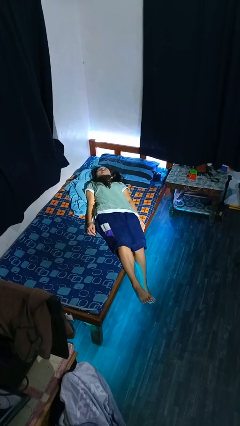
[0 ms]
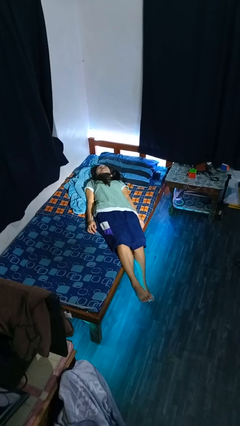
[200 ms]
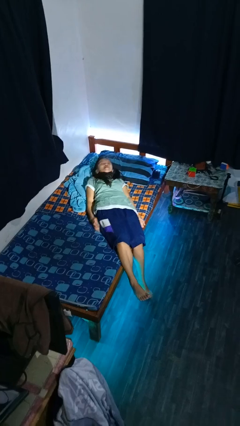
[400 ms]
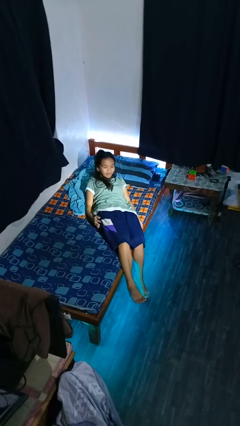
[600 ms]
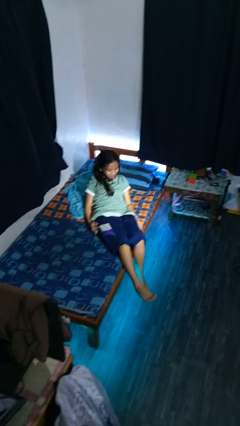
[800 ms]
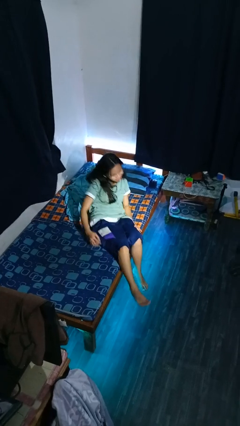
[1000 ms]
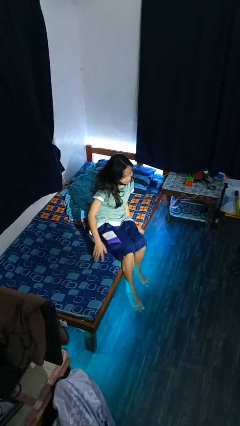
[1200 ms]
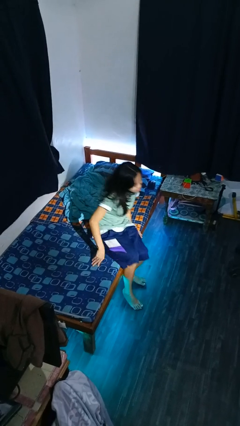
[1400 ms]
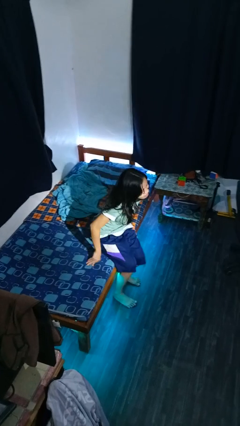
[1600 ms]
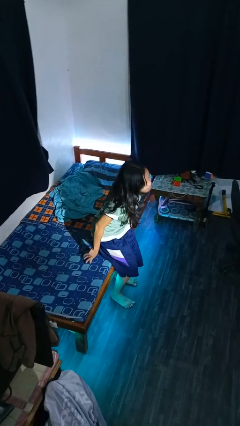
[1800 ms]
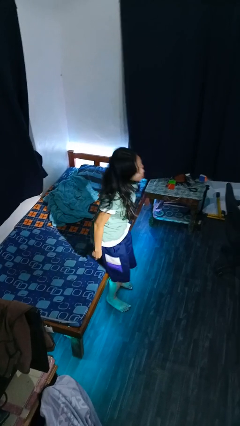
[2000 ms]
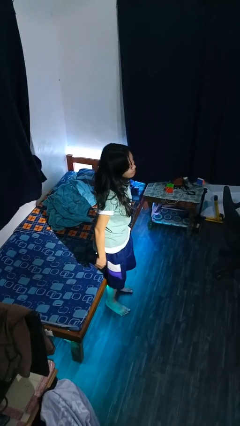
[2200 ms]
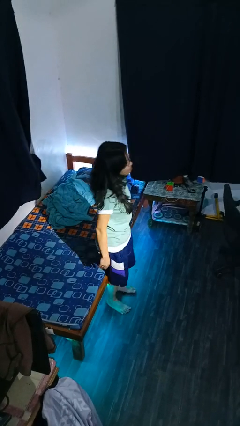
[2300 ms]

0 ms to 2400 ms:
person stands up

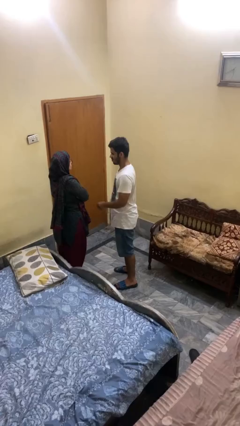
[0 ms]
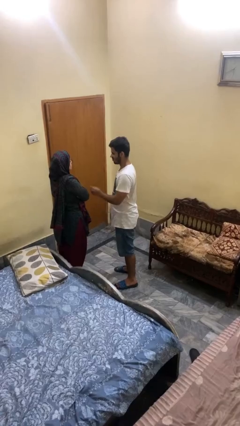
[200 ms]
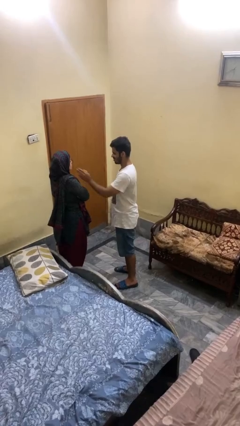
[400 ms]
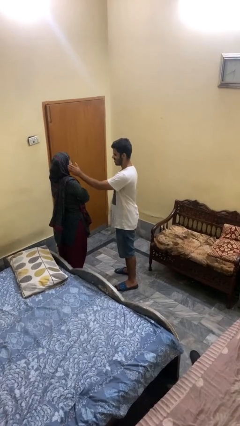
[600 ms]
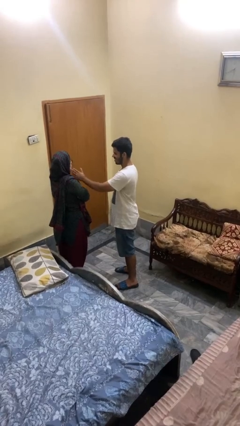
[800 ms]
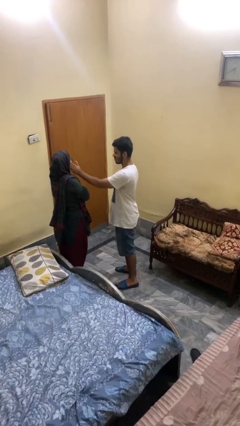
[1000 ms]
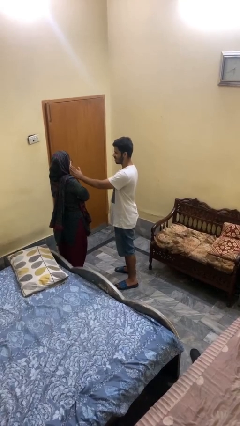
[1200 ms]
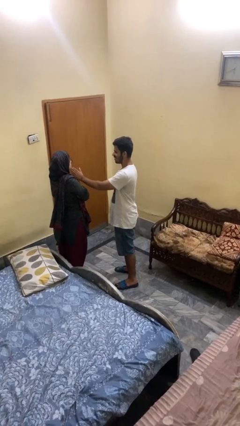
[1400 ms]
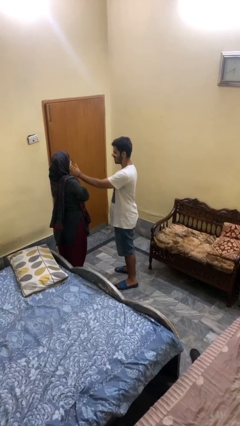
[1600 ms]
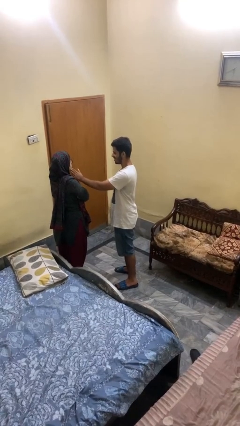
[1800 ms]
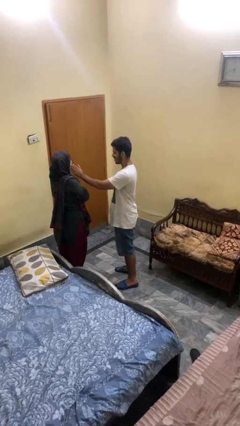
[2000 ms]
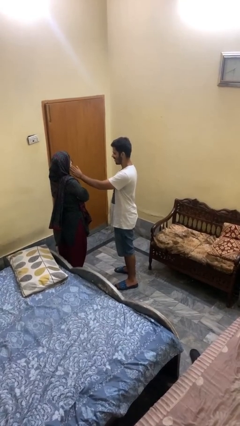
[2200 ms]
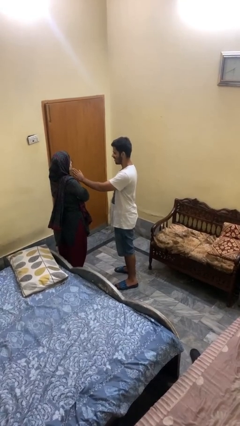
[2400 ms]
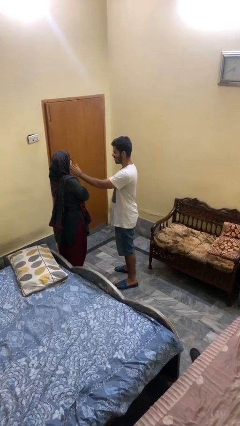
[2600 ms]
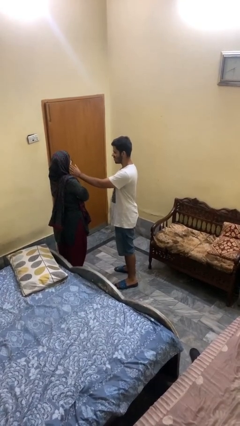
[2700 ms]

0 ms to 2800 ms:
person touches face of person

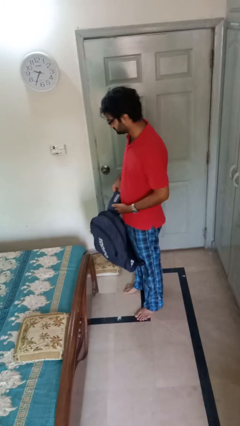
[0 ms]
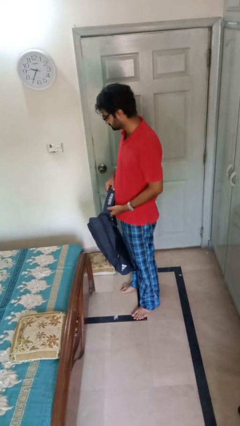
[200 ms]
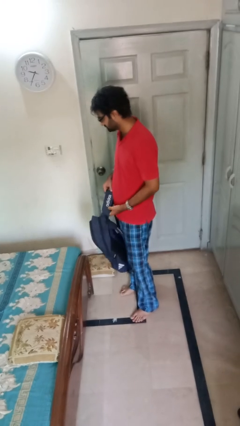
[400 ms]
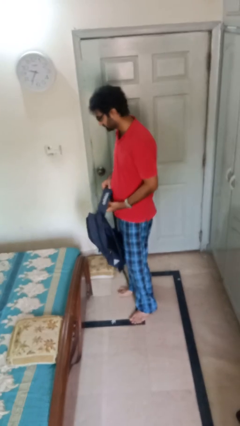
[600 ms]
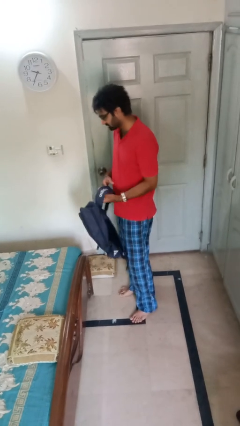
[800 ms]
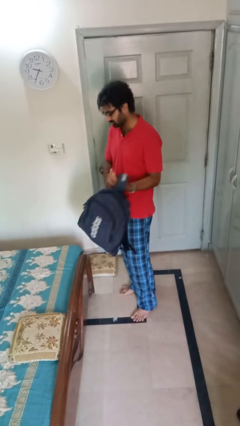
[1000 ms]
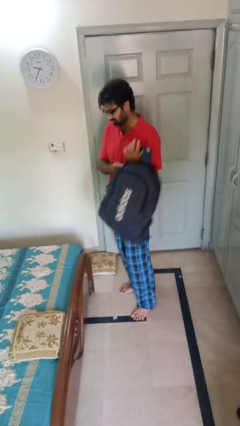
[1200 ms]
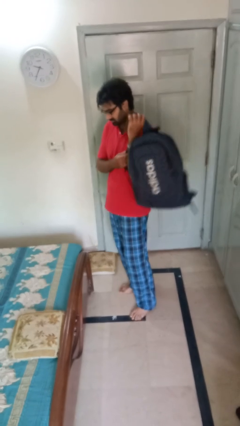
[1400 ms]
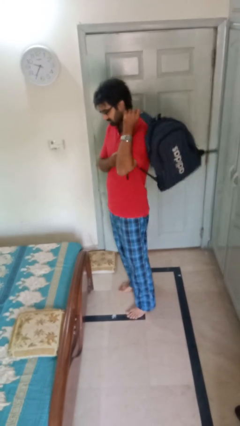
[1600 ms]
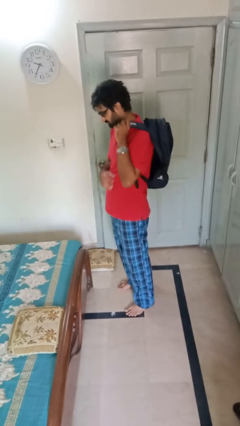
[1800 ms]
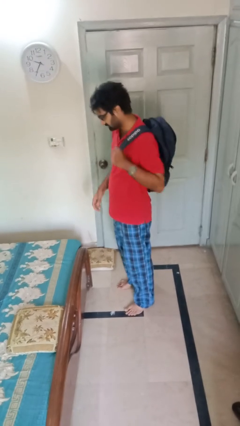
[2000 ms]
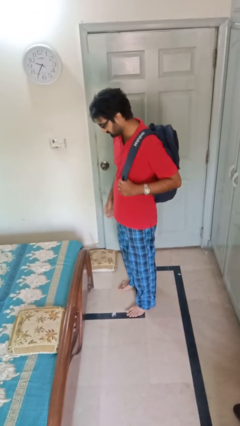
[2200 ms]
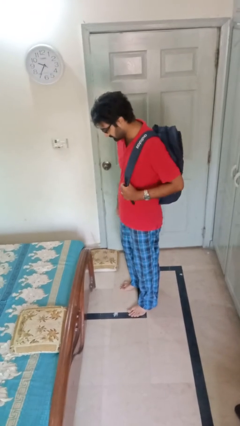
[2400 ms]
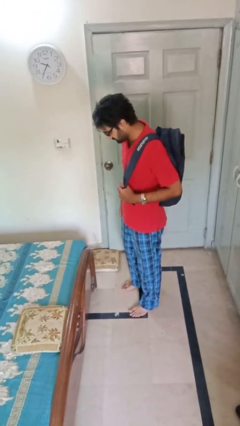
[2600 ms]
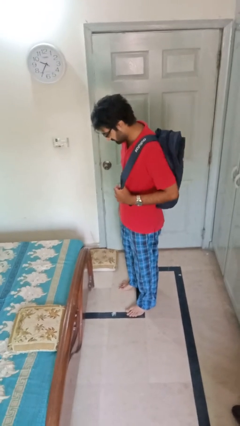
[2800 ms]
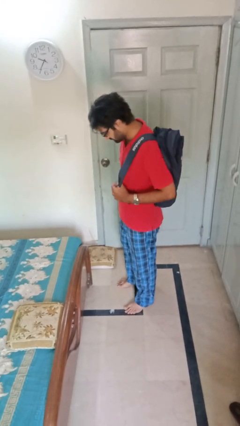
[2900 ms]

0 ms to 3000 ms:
person puts on backpack

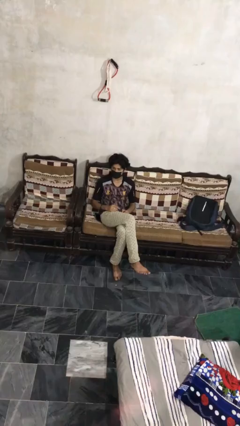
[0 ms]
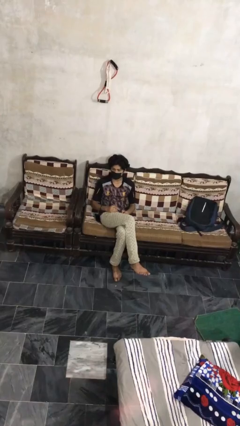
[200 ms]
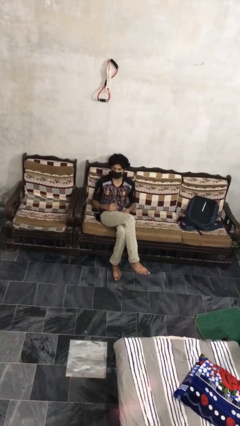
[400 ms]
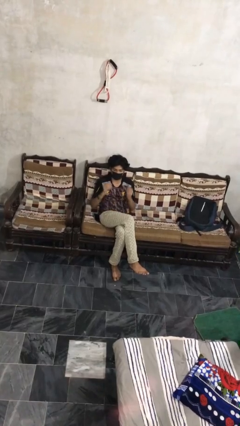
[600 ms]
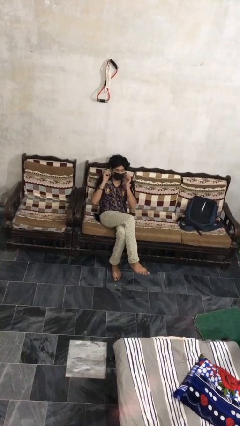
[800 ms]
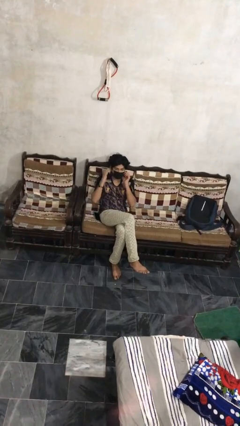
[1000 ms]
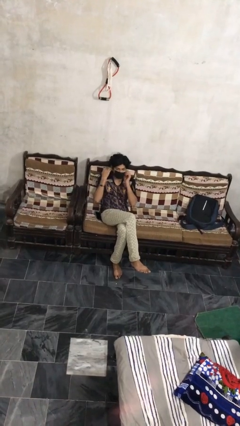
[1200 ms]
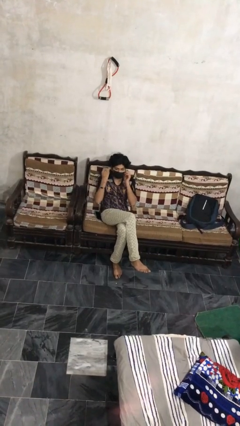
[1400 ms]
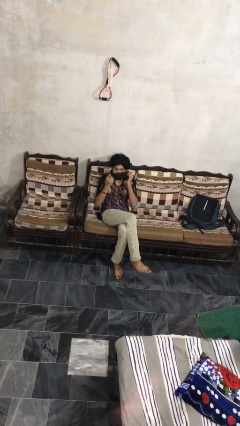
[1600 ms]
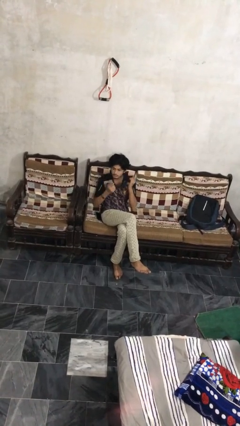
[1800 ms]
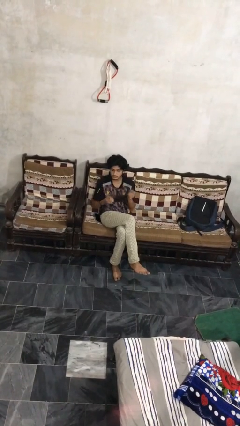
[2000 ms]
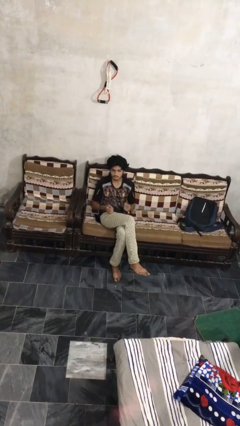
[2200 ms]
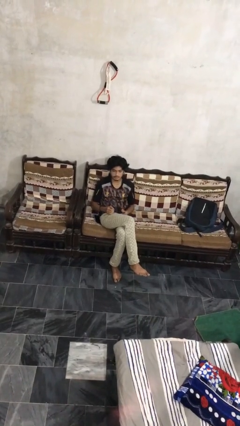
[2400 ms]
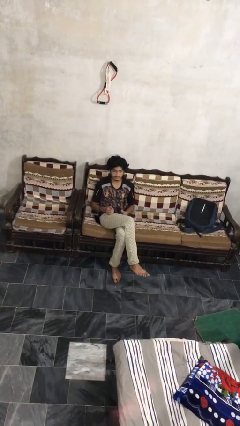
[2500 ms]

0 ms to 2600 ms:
person takes off facemask

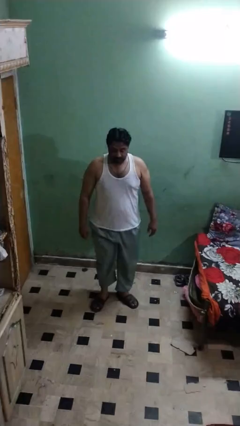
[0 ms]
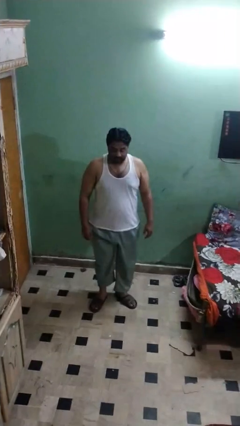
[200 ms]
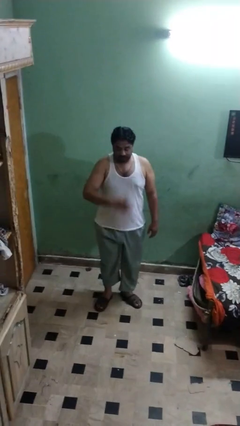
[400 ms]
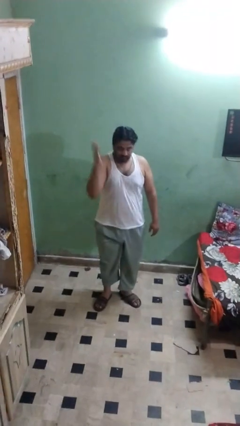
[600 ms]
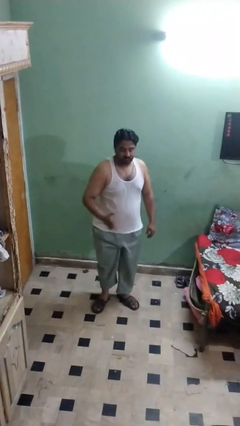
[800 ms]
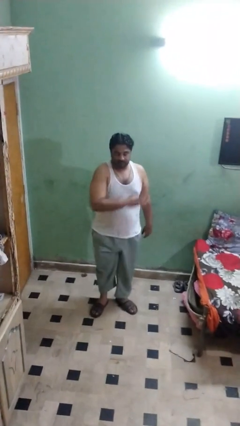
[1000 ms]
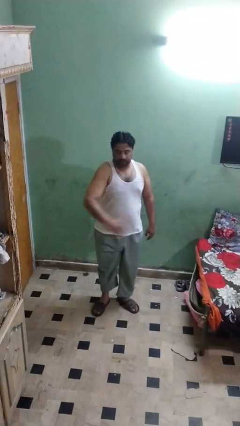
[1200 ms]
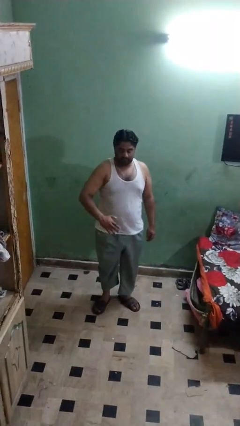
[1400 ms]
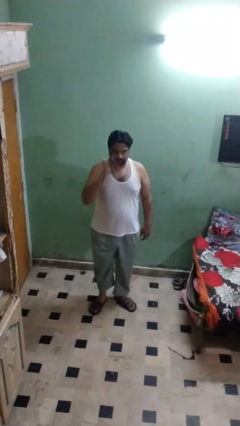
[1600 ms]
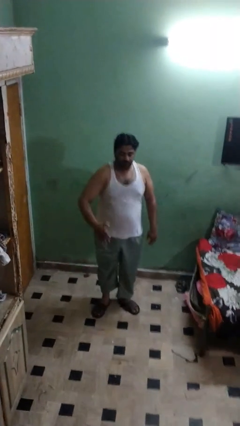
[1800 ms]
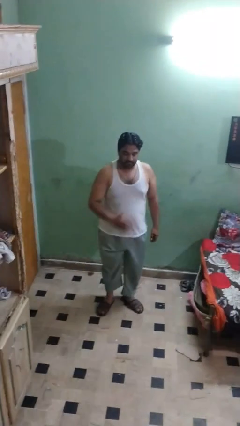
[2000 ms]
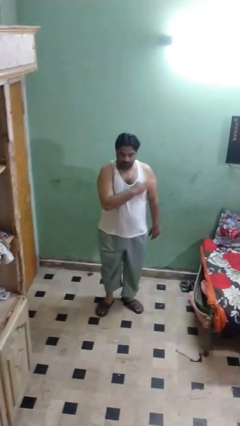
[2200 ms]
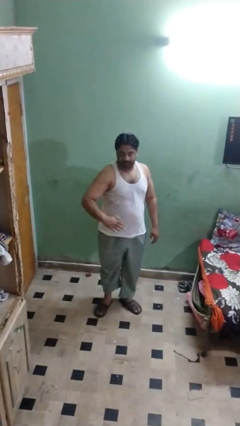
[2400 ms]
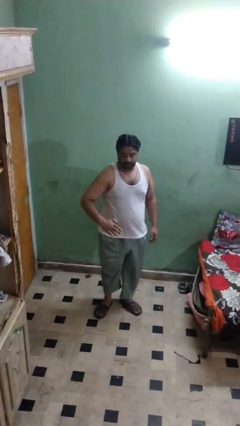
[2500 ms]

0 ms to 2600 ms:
person karate chop

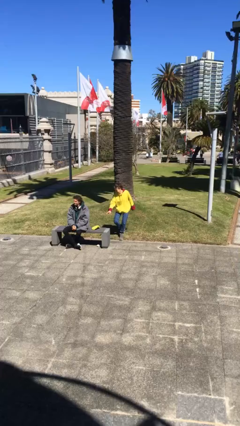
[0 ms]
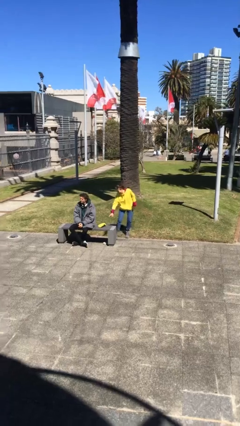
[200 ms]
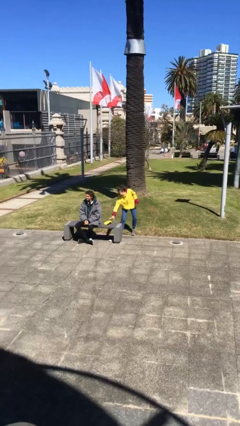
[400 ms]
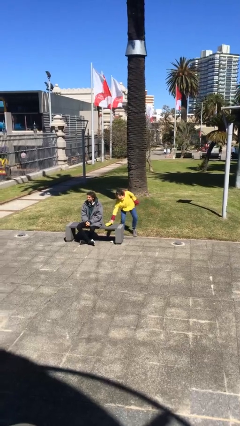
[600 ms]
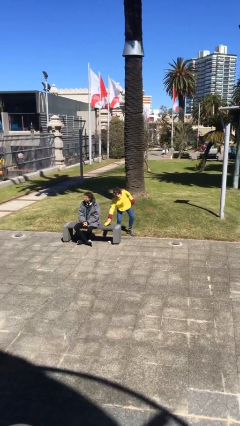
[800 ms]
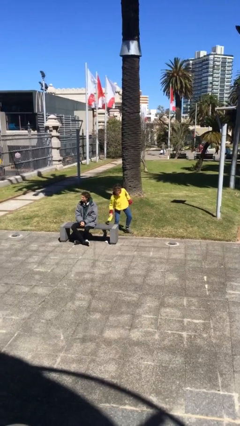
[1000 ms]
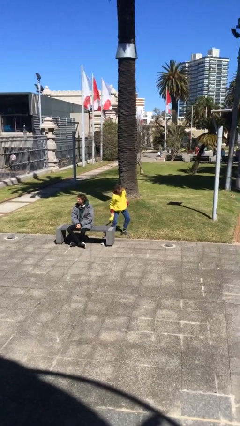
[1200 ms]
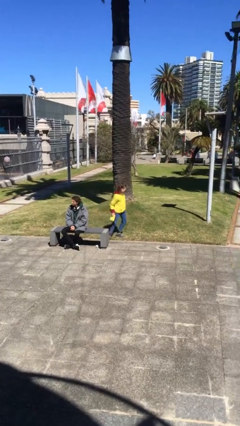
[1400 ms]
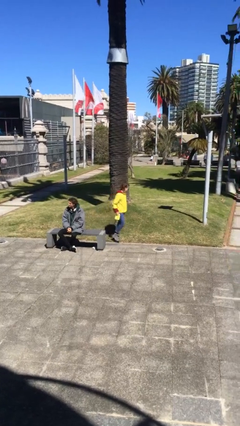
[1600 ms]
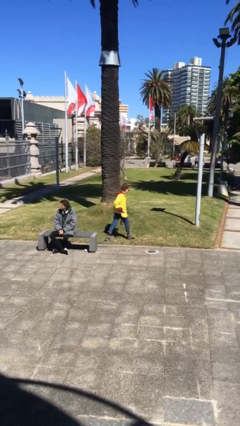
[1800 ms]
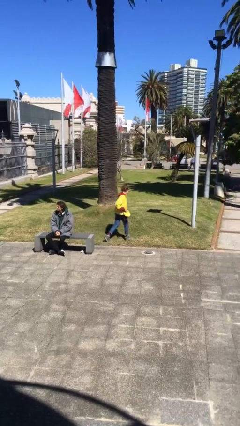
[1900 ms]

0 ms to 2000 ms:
person steals object from person

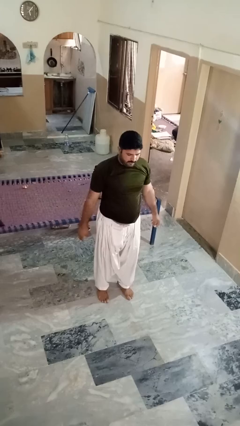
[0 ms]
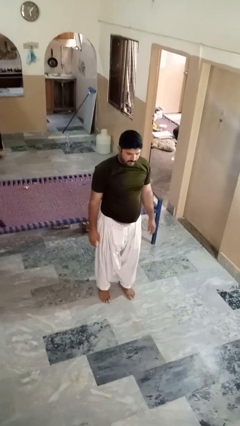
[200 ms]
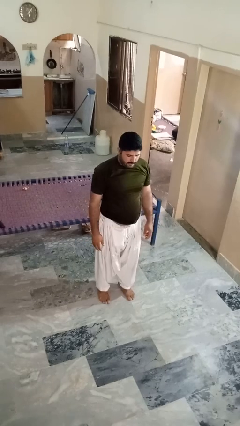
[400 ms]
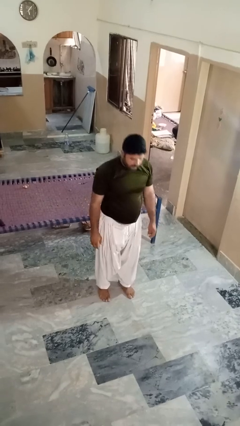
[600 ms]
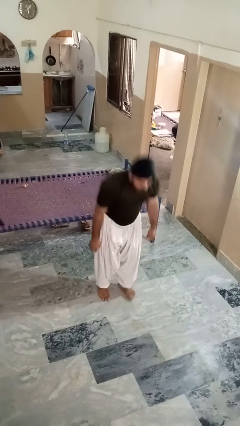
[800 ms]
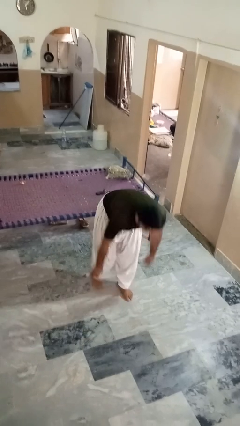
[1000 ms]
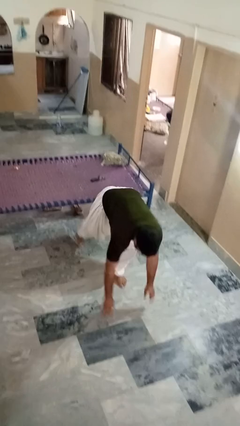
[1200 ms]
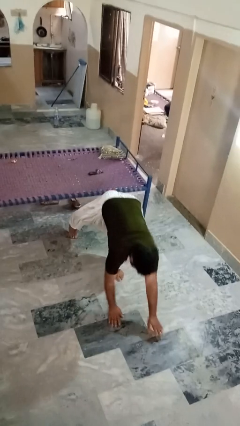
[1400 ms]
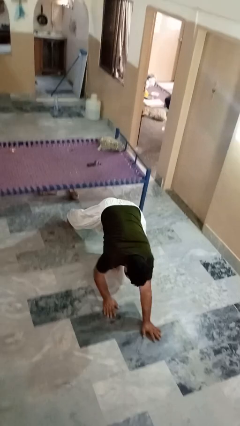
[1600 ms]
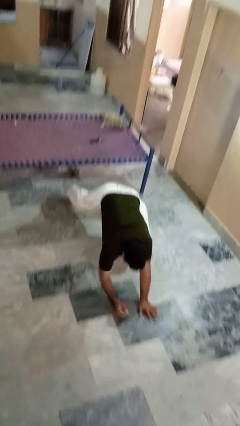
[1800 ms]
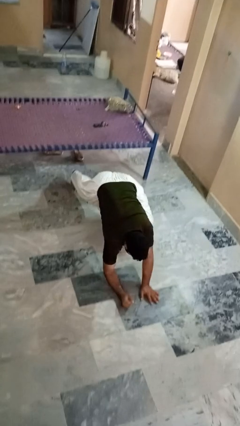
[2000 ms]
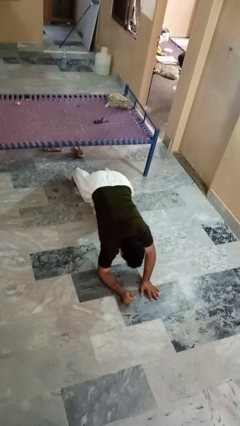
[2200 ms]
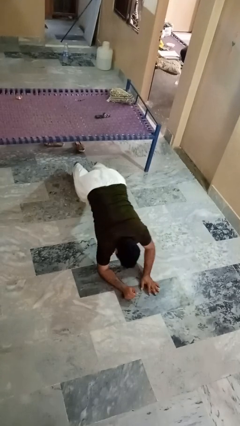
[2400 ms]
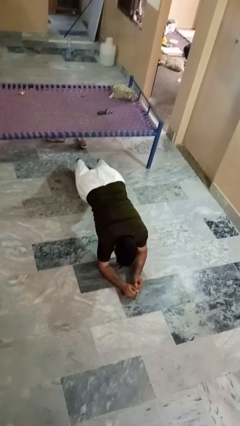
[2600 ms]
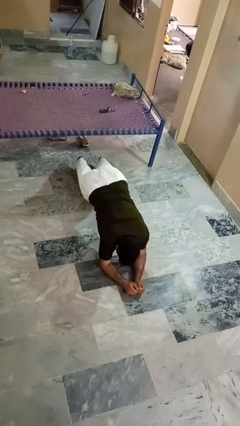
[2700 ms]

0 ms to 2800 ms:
person exercises with plank
